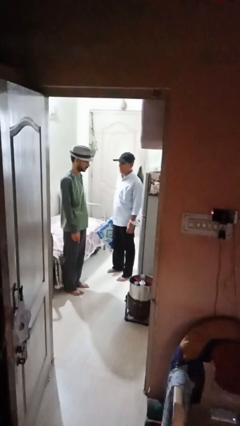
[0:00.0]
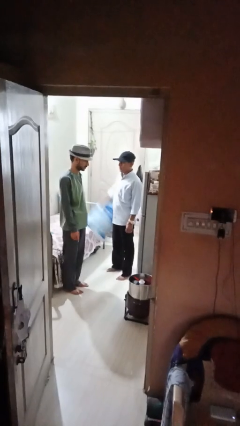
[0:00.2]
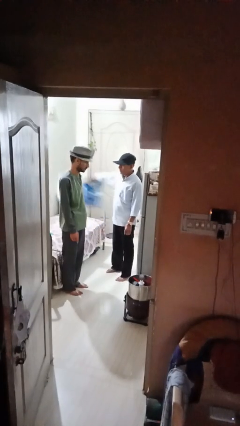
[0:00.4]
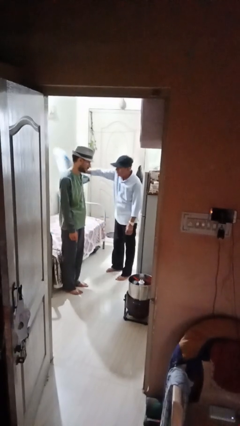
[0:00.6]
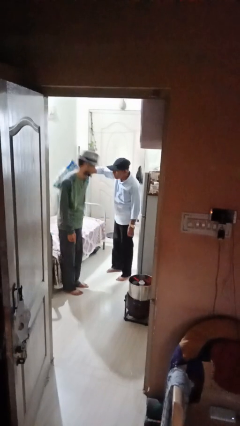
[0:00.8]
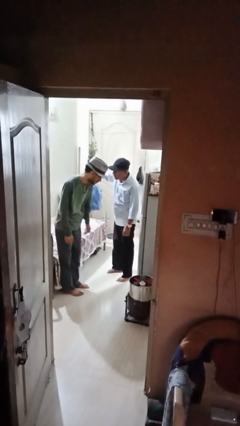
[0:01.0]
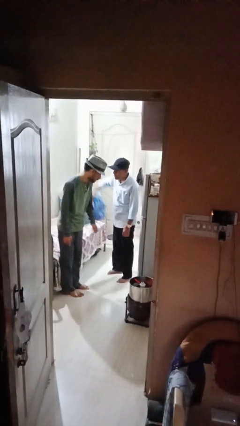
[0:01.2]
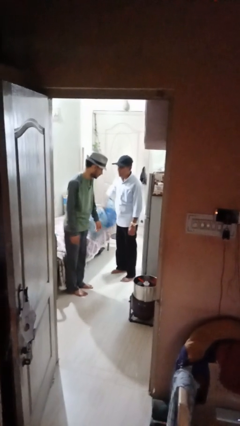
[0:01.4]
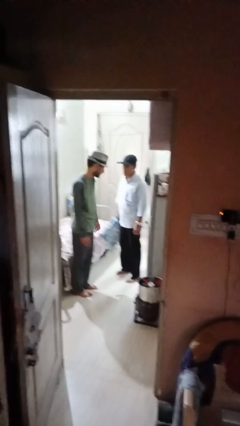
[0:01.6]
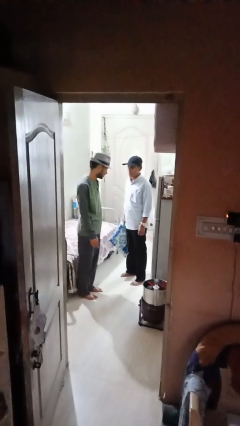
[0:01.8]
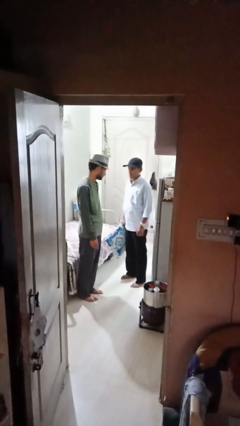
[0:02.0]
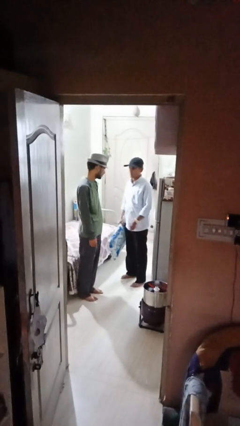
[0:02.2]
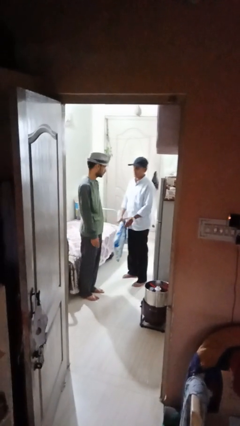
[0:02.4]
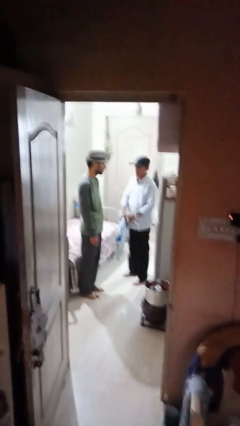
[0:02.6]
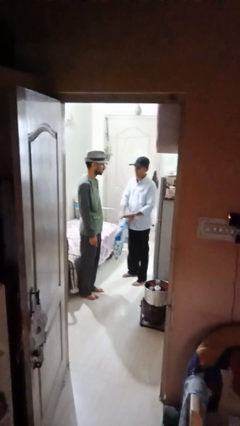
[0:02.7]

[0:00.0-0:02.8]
person hits person with pillow

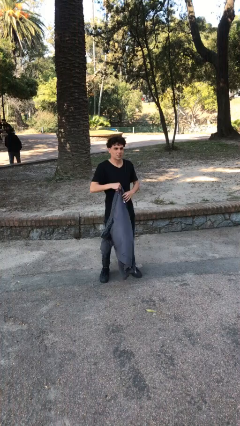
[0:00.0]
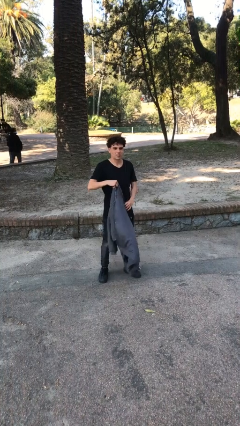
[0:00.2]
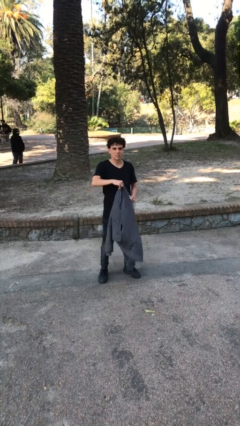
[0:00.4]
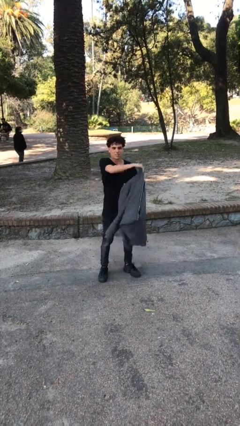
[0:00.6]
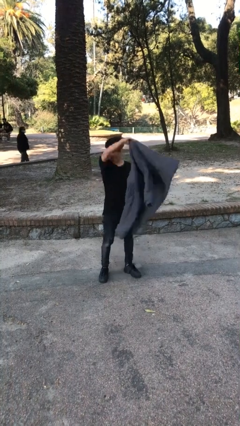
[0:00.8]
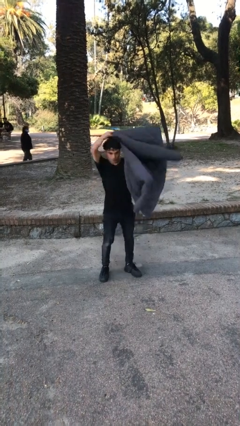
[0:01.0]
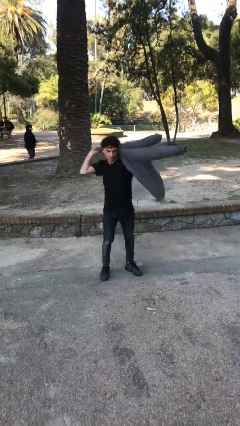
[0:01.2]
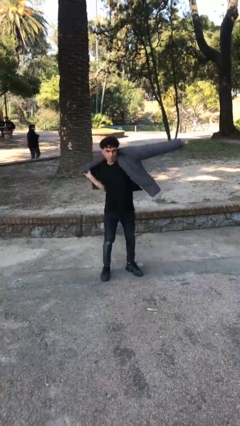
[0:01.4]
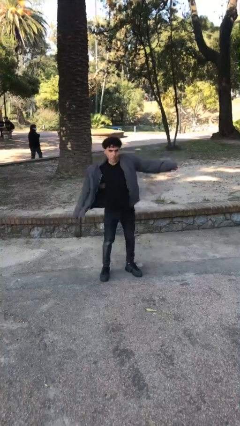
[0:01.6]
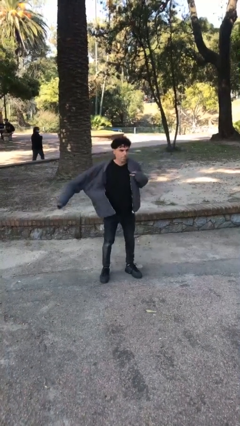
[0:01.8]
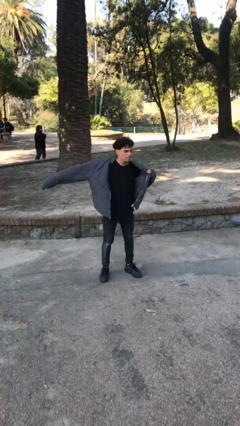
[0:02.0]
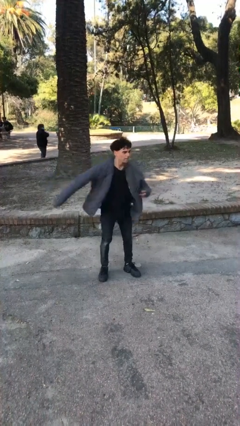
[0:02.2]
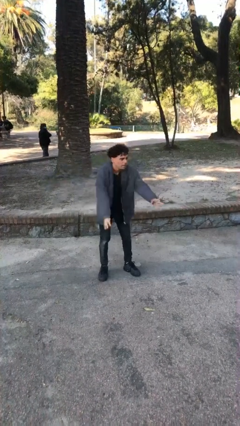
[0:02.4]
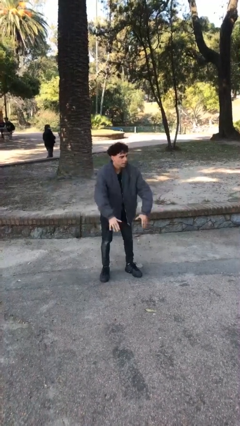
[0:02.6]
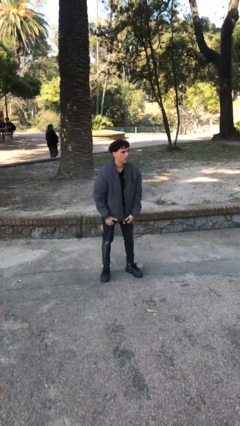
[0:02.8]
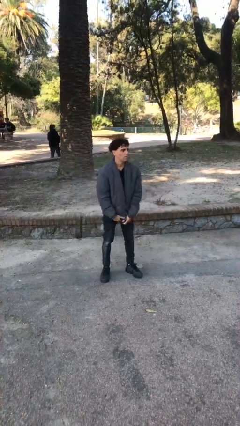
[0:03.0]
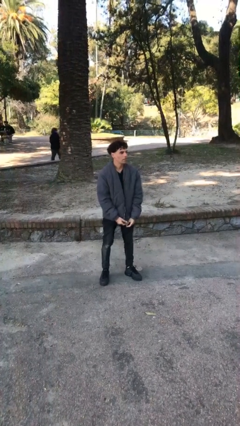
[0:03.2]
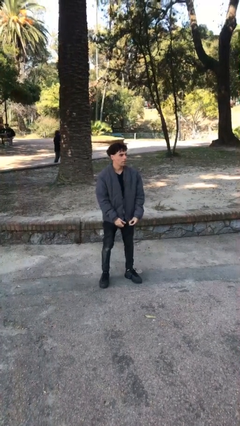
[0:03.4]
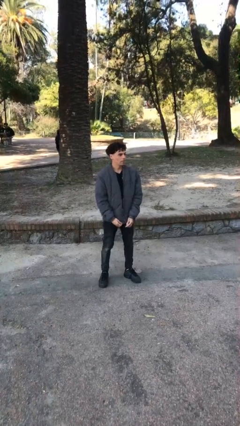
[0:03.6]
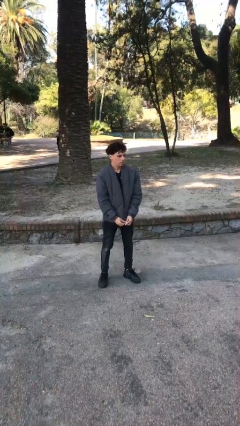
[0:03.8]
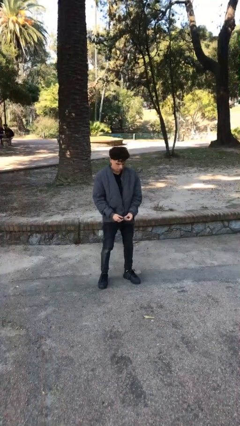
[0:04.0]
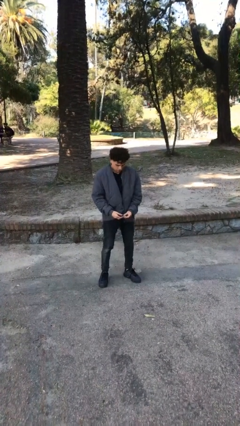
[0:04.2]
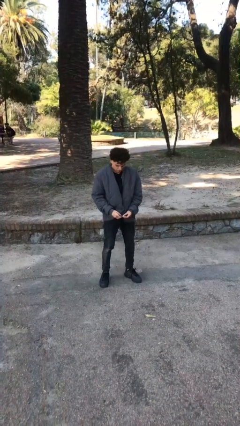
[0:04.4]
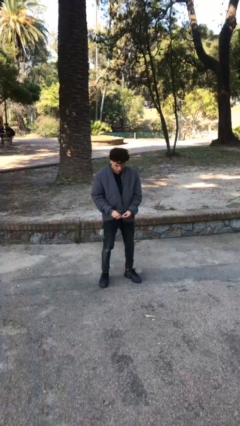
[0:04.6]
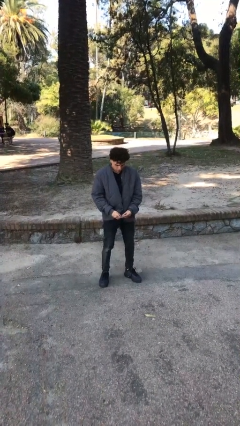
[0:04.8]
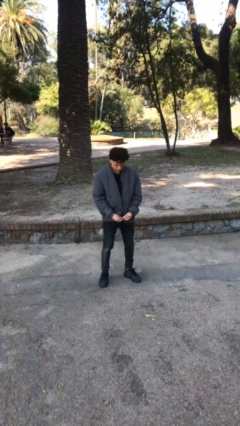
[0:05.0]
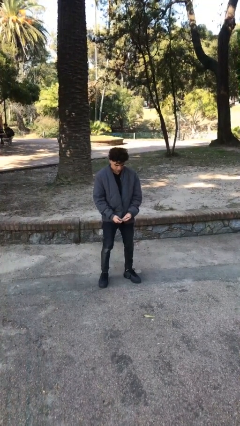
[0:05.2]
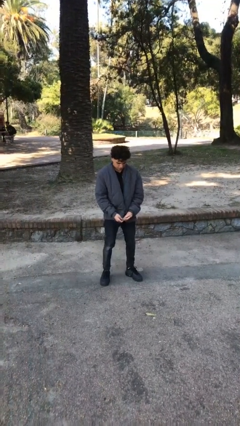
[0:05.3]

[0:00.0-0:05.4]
person puts on jacket

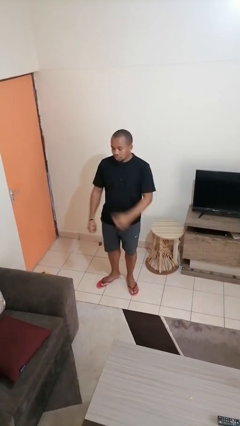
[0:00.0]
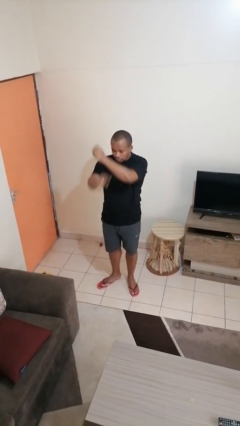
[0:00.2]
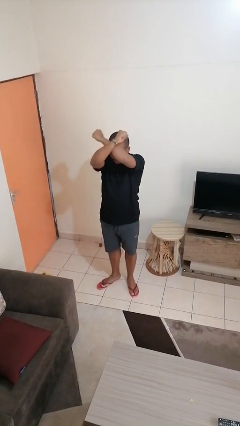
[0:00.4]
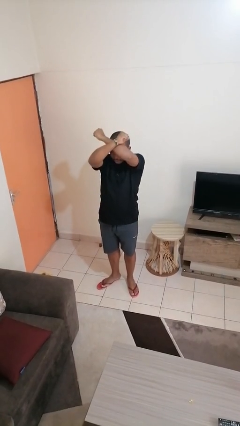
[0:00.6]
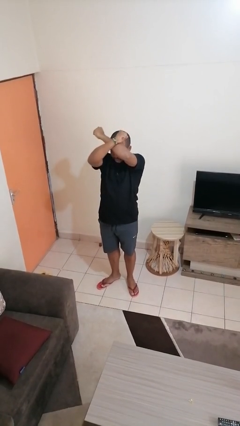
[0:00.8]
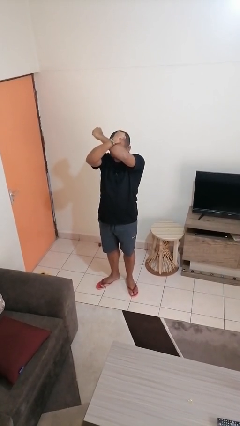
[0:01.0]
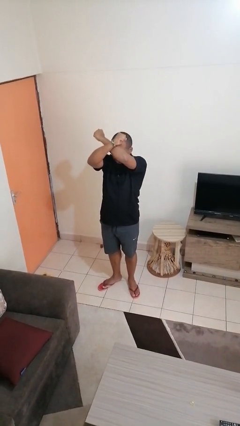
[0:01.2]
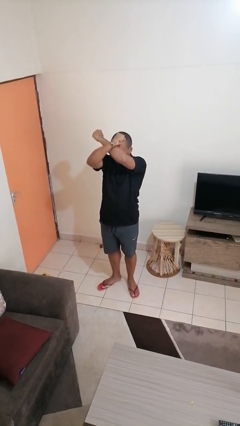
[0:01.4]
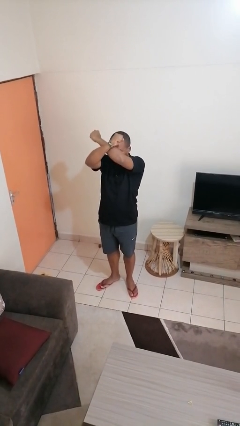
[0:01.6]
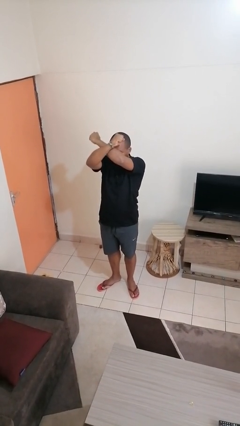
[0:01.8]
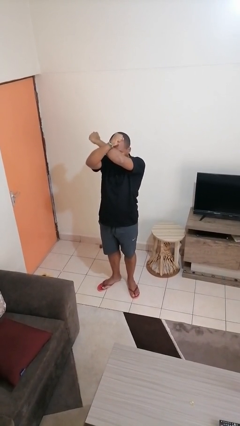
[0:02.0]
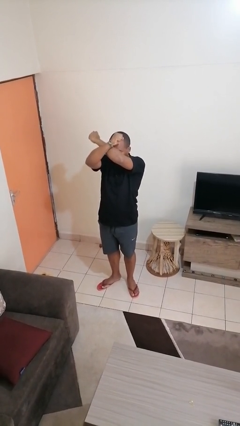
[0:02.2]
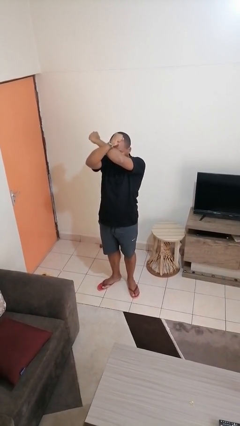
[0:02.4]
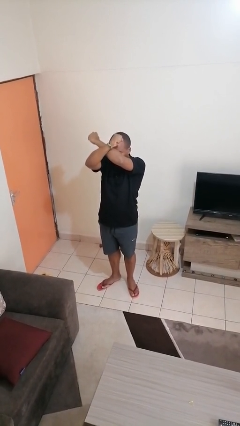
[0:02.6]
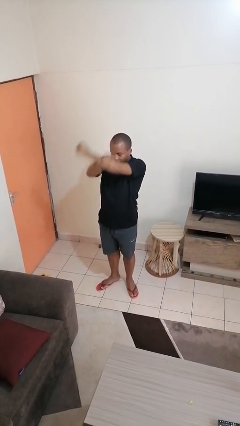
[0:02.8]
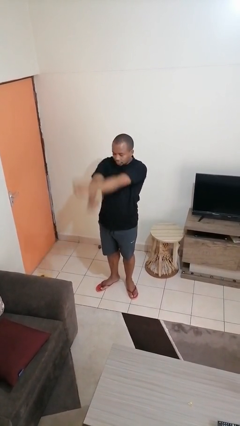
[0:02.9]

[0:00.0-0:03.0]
person gestures arms x

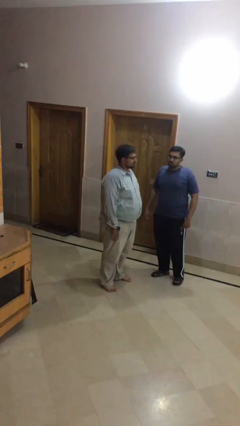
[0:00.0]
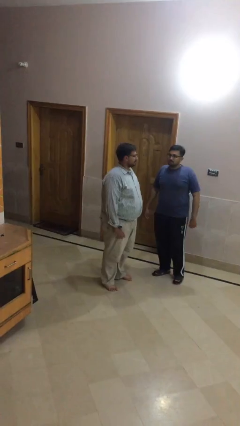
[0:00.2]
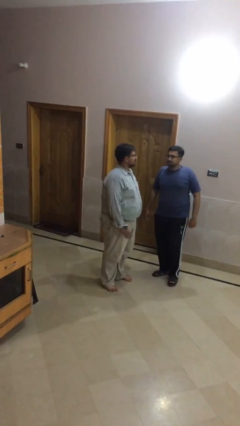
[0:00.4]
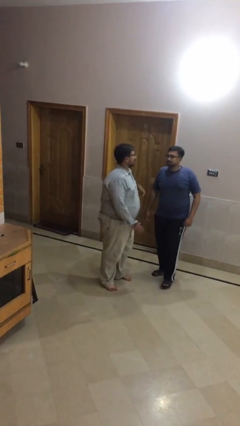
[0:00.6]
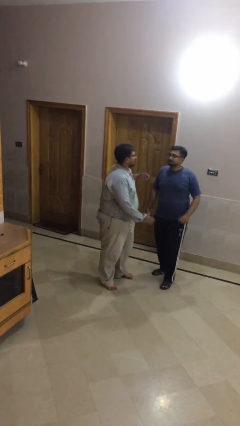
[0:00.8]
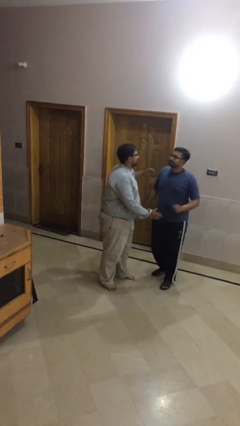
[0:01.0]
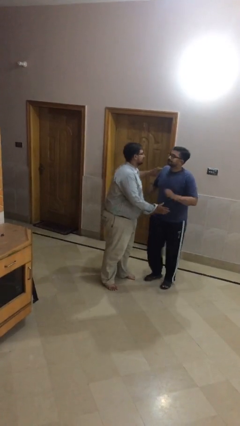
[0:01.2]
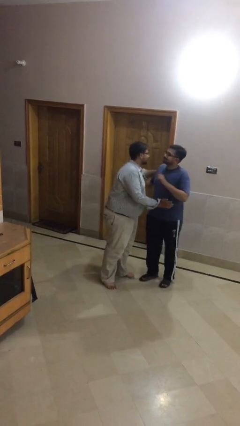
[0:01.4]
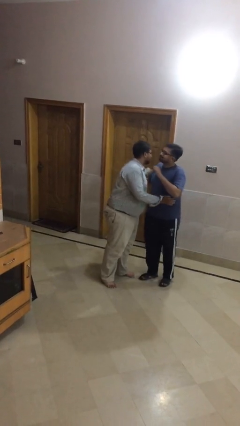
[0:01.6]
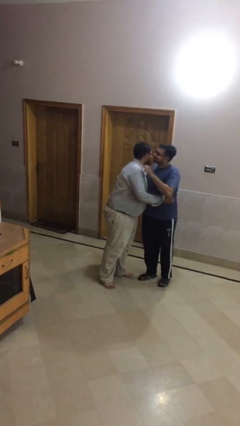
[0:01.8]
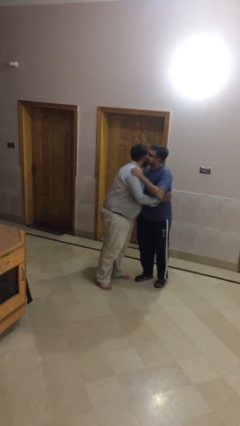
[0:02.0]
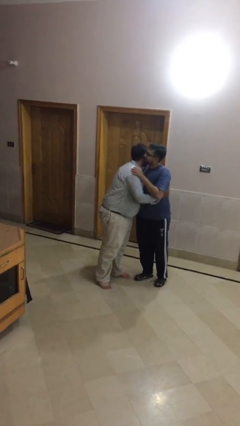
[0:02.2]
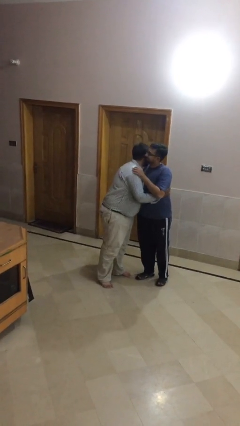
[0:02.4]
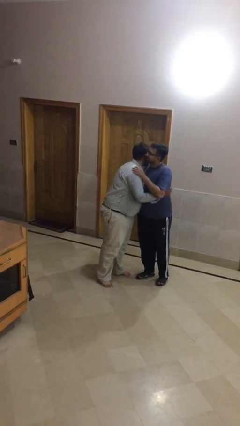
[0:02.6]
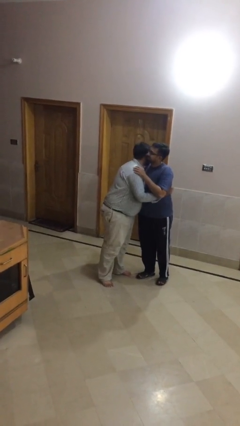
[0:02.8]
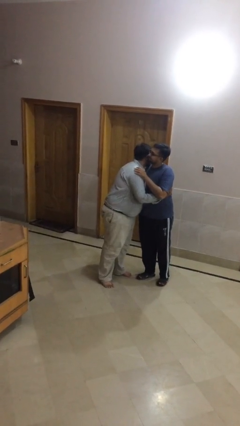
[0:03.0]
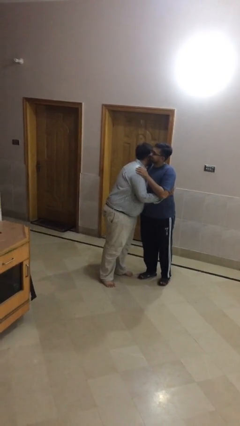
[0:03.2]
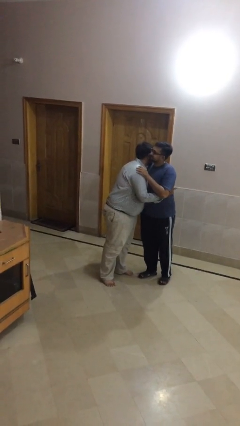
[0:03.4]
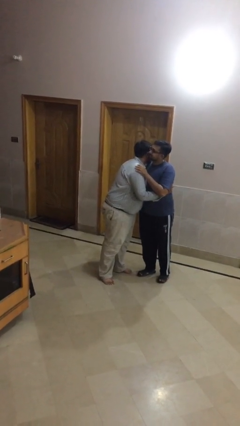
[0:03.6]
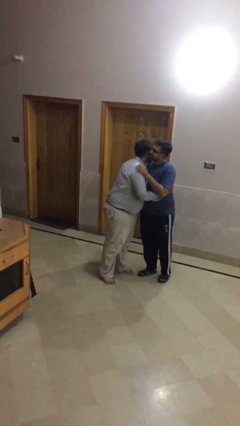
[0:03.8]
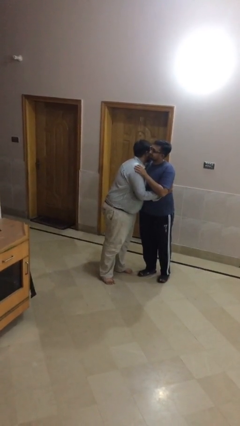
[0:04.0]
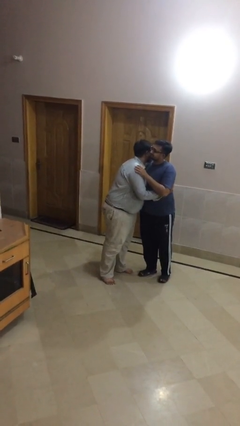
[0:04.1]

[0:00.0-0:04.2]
person embraces person

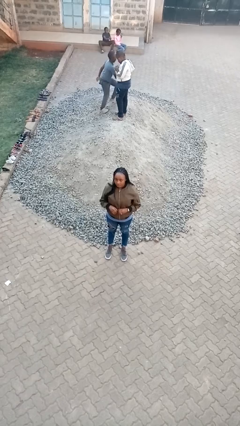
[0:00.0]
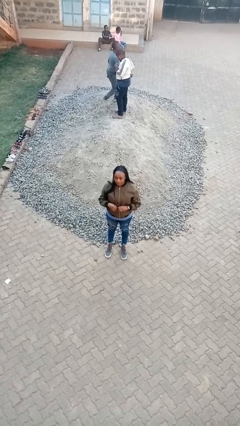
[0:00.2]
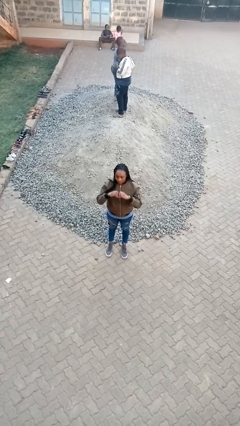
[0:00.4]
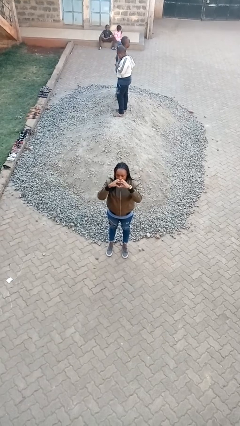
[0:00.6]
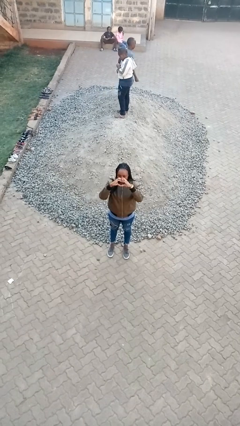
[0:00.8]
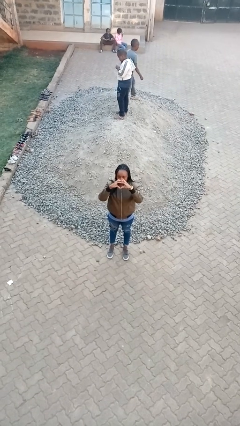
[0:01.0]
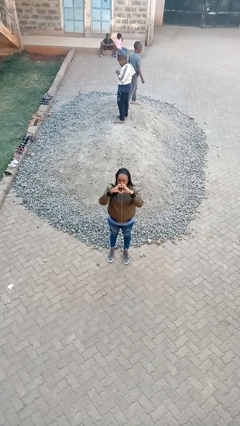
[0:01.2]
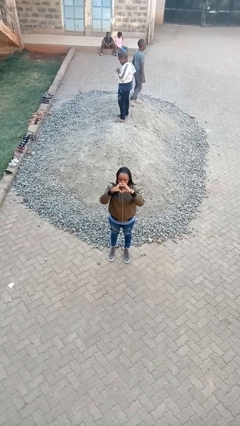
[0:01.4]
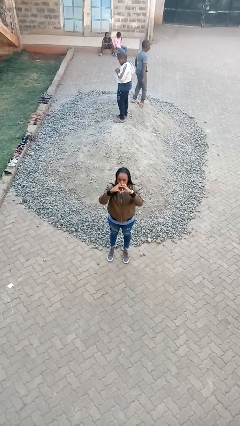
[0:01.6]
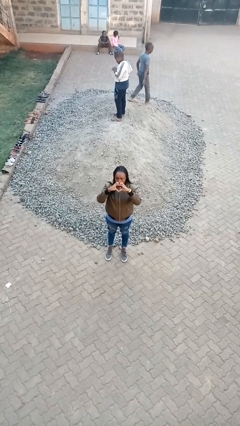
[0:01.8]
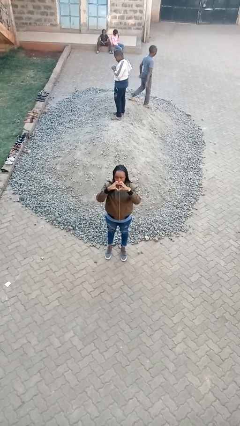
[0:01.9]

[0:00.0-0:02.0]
person gestures heart
